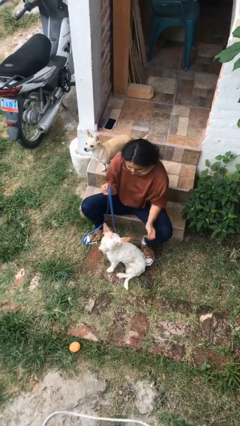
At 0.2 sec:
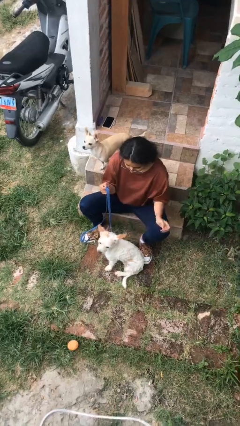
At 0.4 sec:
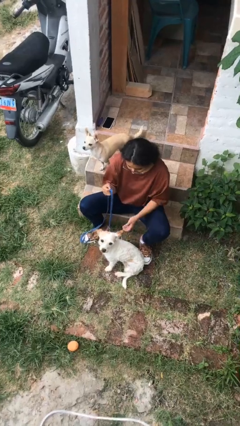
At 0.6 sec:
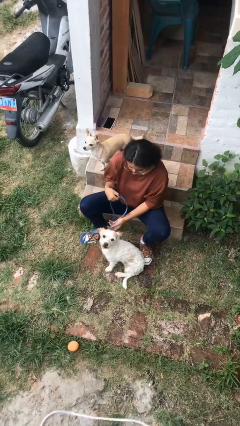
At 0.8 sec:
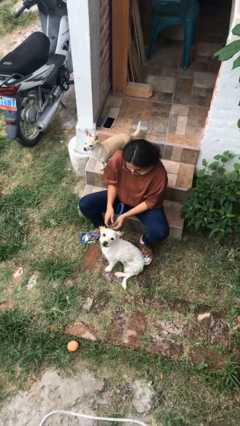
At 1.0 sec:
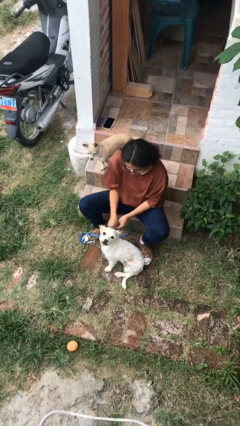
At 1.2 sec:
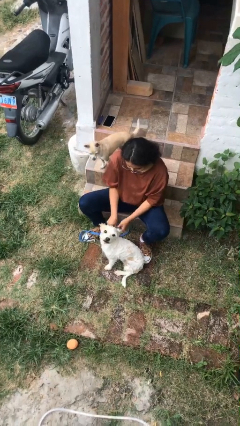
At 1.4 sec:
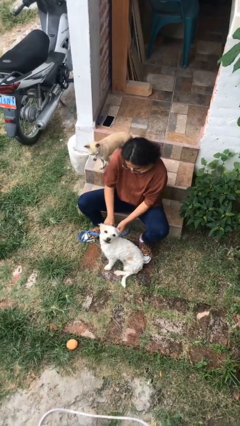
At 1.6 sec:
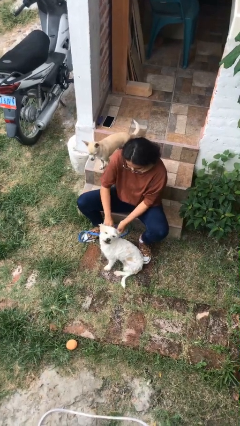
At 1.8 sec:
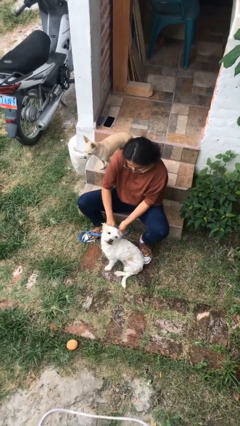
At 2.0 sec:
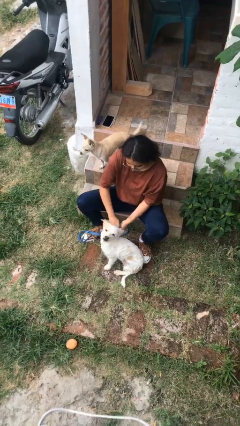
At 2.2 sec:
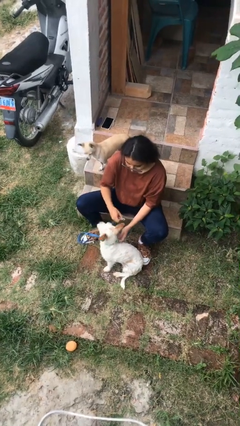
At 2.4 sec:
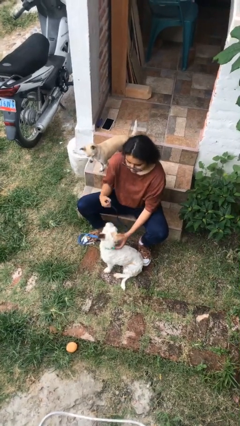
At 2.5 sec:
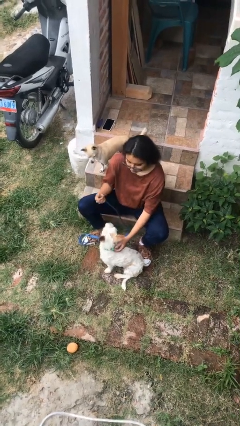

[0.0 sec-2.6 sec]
person unattaches leash from dog

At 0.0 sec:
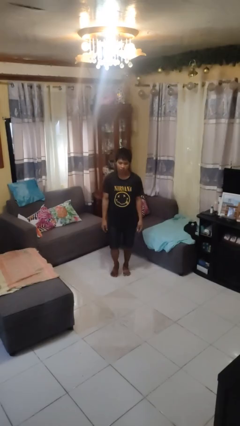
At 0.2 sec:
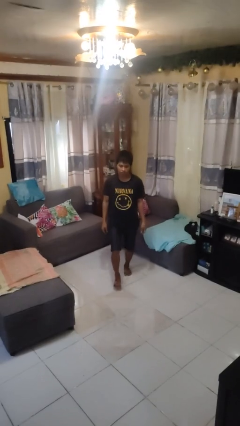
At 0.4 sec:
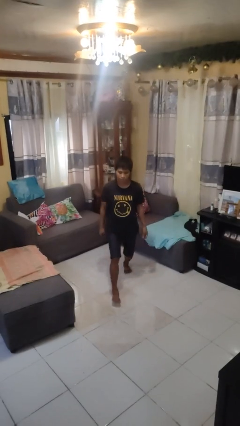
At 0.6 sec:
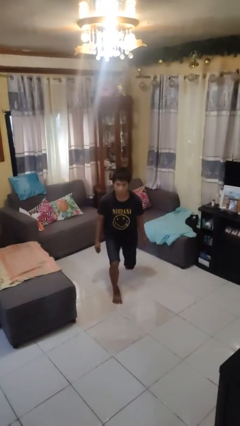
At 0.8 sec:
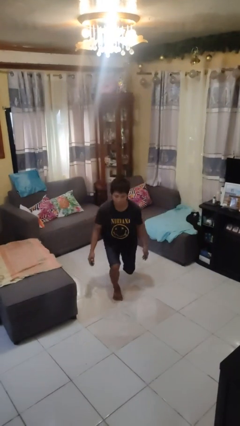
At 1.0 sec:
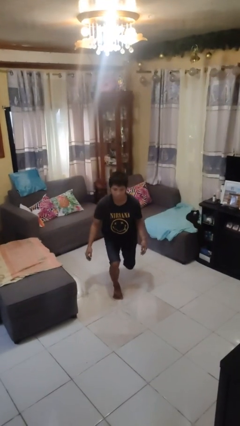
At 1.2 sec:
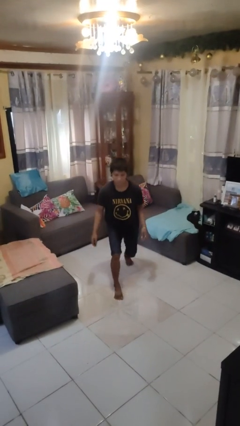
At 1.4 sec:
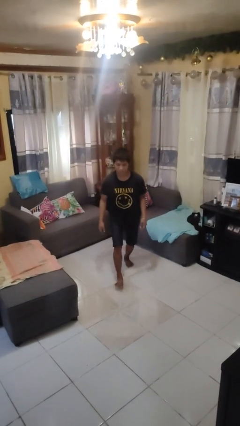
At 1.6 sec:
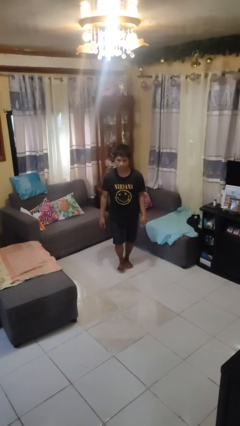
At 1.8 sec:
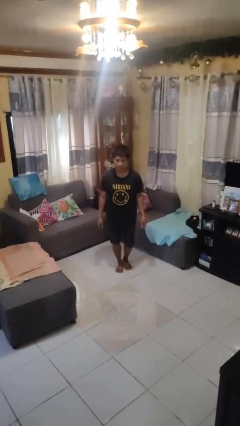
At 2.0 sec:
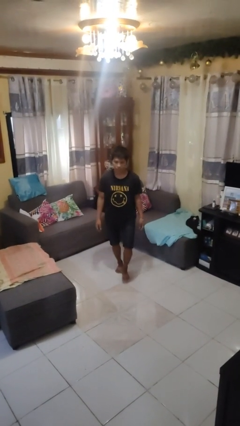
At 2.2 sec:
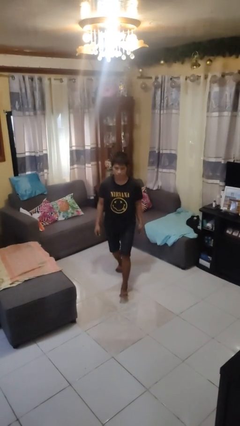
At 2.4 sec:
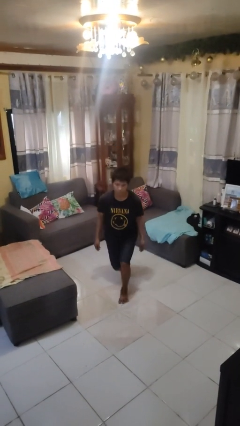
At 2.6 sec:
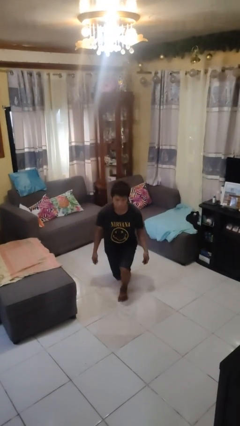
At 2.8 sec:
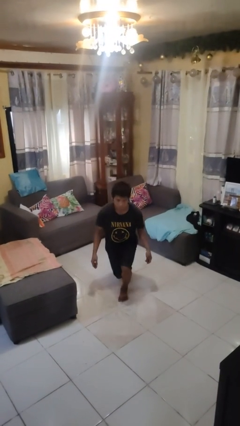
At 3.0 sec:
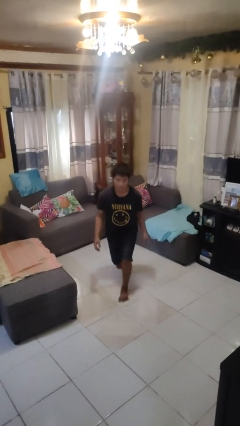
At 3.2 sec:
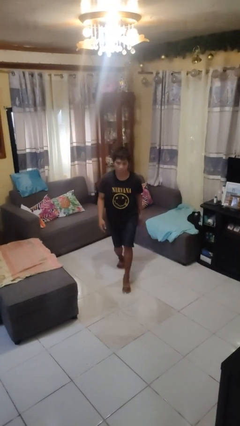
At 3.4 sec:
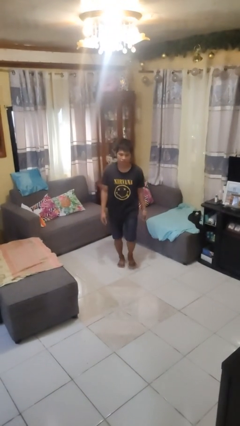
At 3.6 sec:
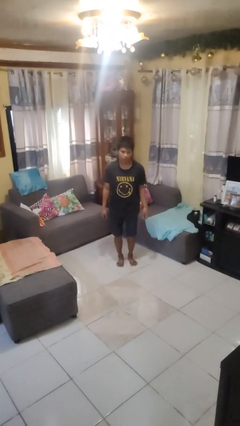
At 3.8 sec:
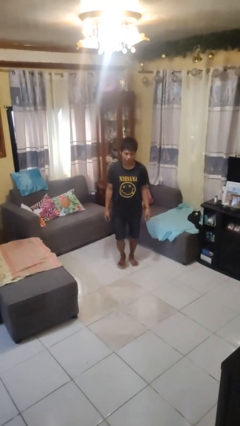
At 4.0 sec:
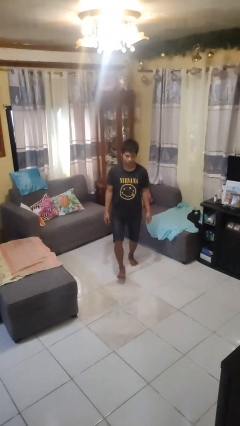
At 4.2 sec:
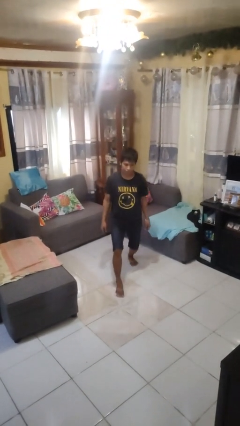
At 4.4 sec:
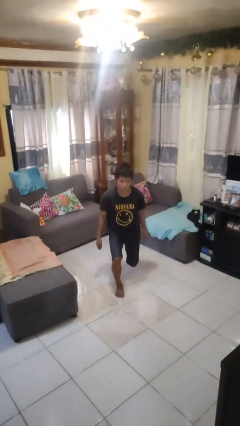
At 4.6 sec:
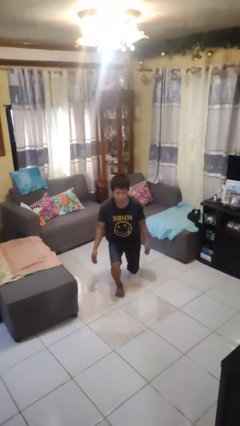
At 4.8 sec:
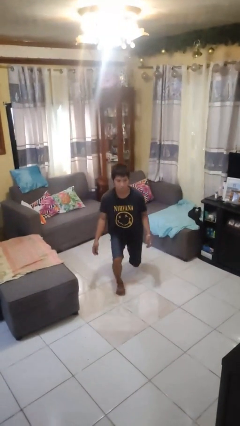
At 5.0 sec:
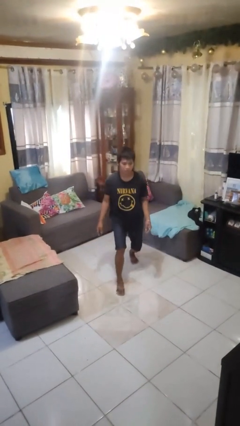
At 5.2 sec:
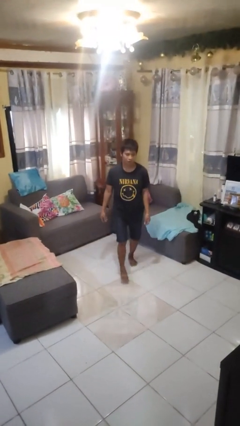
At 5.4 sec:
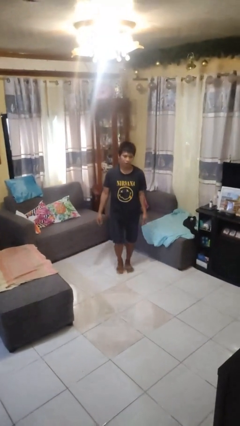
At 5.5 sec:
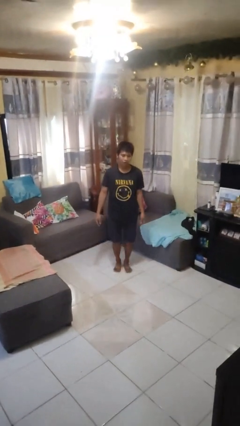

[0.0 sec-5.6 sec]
person exercises with lunges

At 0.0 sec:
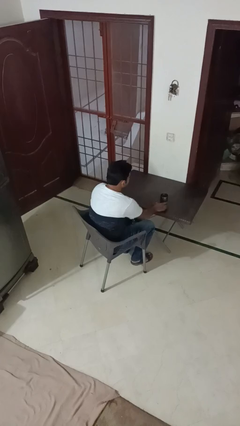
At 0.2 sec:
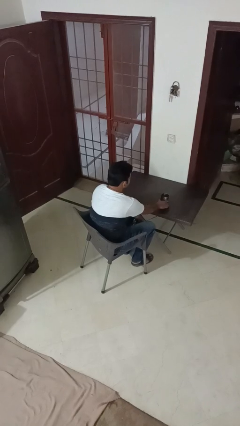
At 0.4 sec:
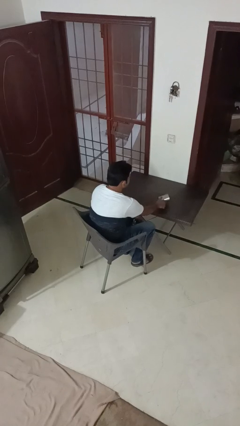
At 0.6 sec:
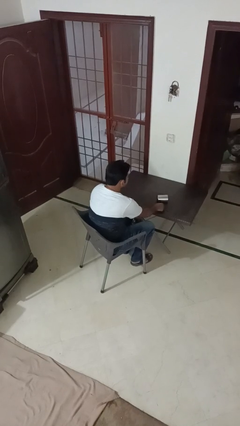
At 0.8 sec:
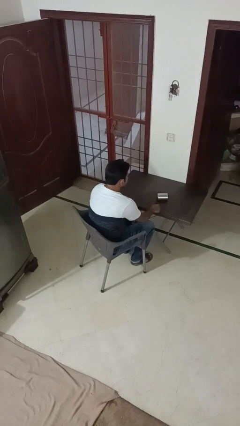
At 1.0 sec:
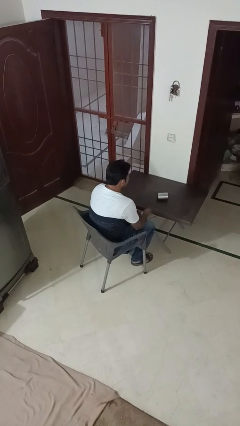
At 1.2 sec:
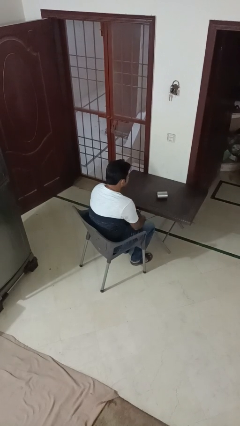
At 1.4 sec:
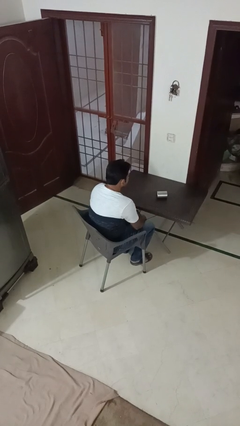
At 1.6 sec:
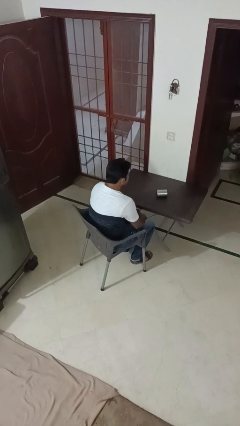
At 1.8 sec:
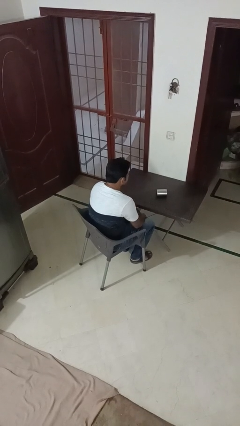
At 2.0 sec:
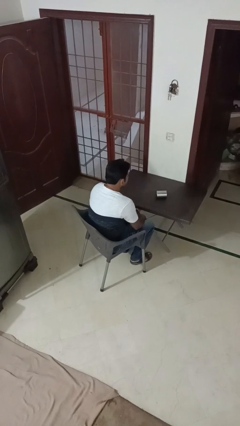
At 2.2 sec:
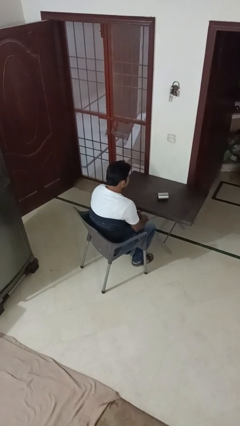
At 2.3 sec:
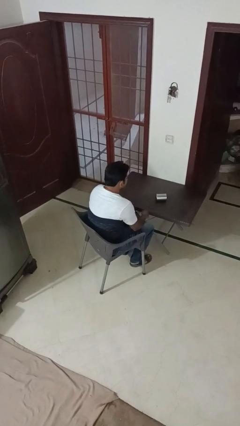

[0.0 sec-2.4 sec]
person knocks over glass

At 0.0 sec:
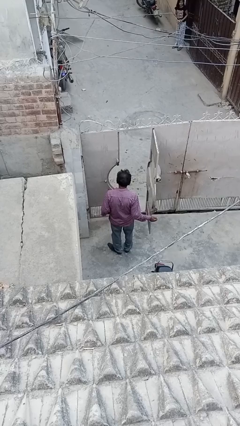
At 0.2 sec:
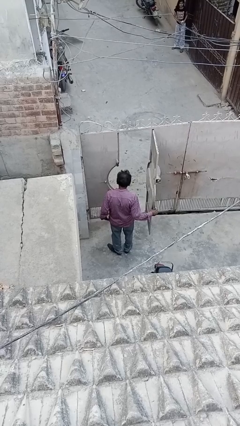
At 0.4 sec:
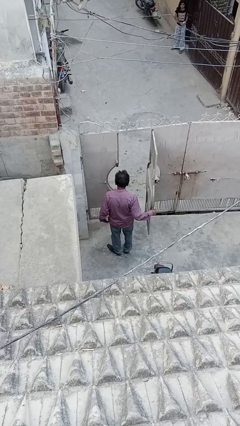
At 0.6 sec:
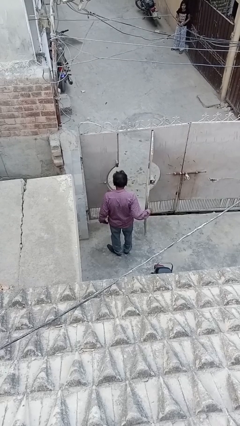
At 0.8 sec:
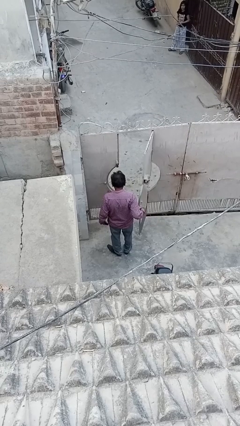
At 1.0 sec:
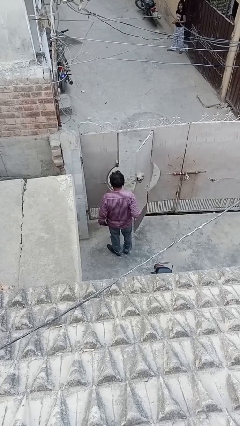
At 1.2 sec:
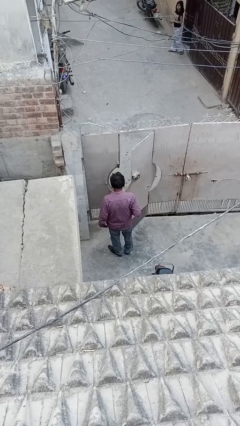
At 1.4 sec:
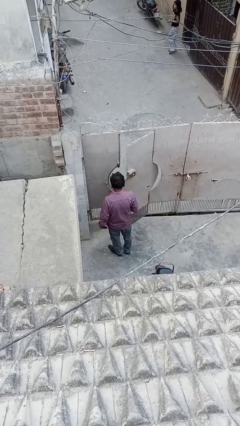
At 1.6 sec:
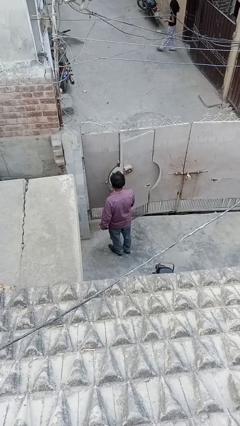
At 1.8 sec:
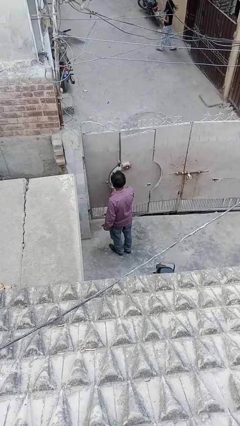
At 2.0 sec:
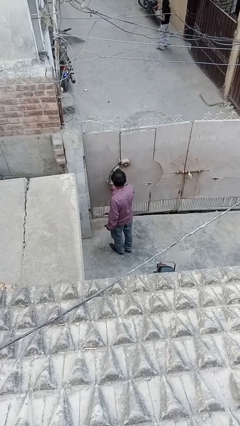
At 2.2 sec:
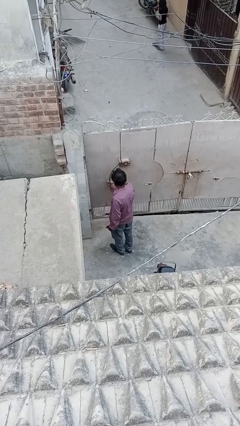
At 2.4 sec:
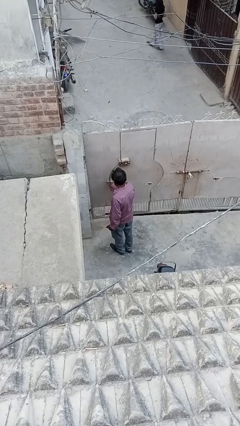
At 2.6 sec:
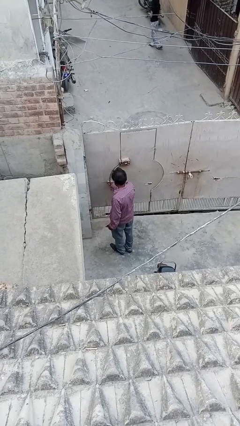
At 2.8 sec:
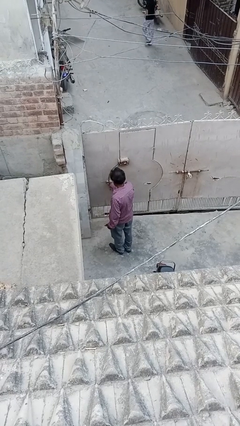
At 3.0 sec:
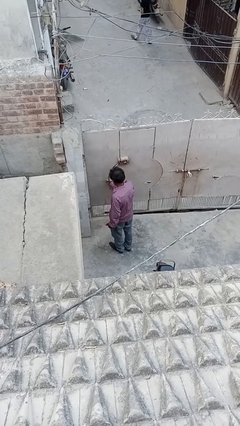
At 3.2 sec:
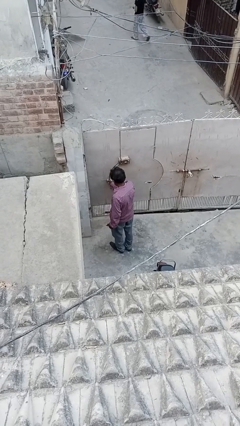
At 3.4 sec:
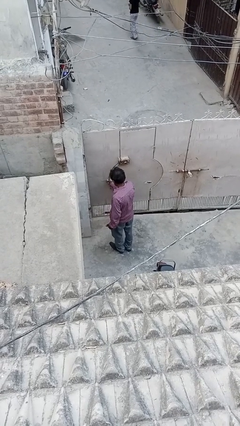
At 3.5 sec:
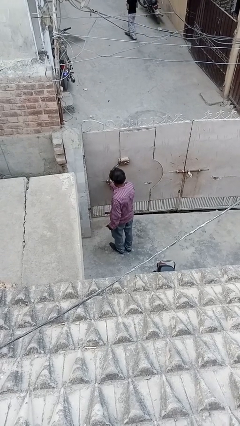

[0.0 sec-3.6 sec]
person closes facility door

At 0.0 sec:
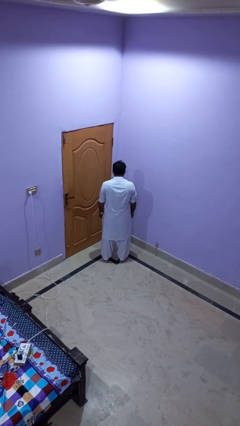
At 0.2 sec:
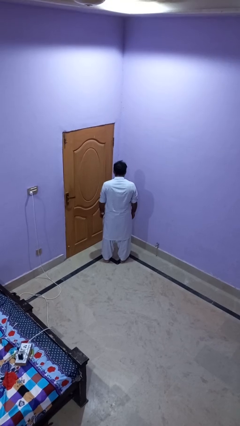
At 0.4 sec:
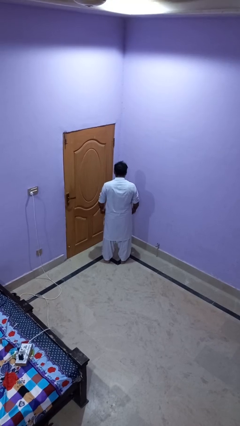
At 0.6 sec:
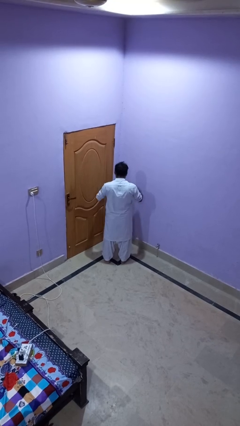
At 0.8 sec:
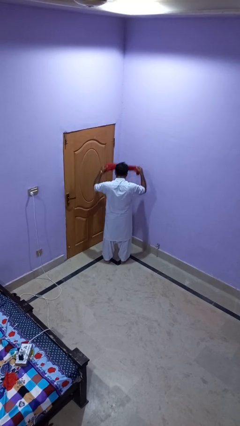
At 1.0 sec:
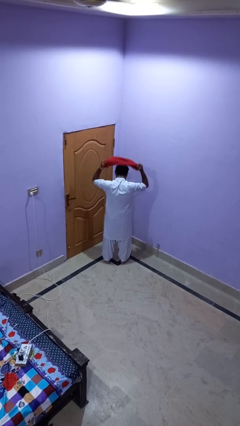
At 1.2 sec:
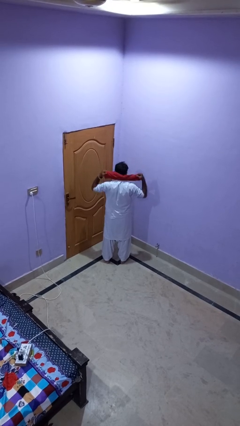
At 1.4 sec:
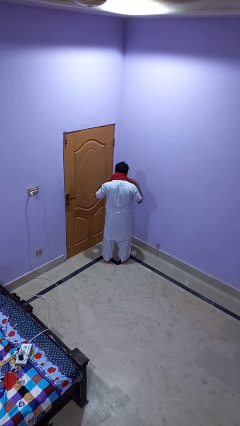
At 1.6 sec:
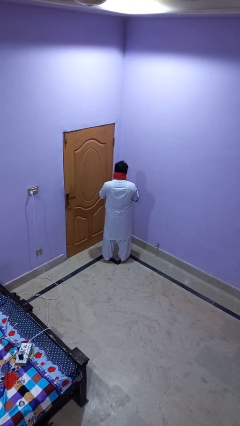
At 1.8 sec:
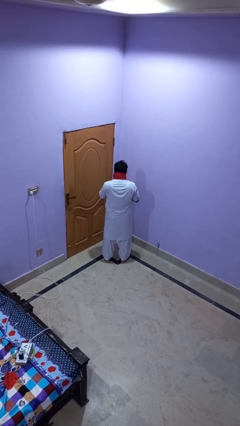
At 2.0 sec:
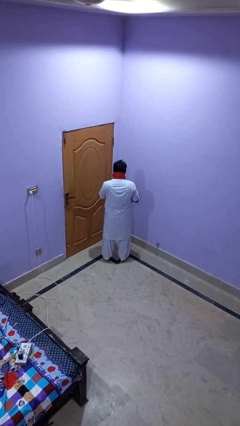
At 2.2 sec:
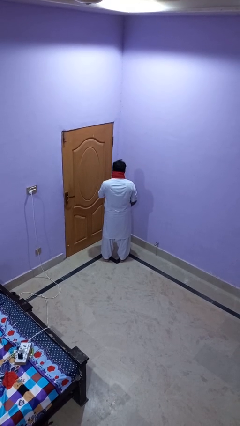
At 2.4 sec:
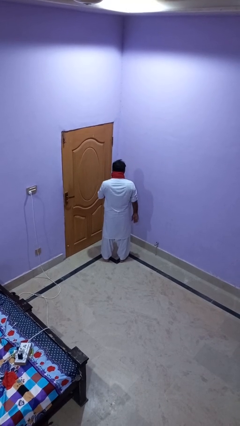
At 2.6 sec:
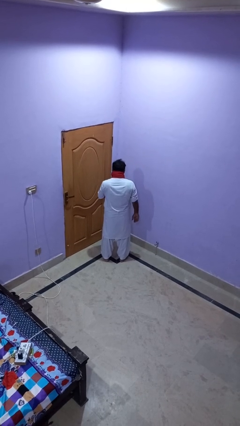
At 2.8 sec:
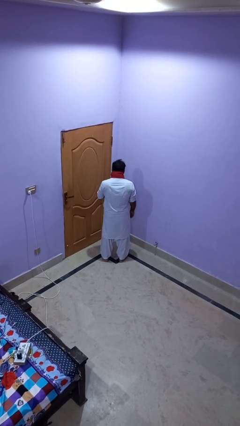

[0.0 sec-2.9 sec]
person puts on scarf

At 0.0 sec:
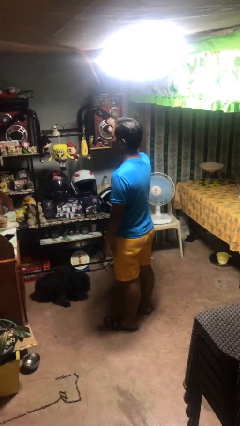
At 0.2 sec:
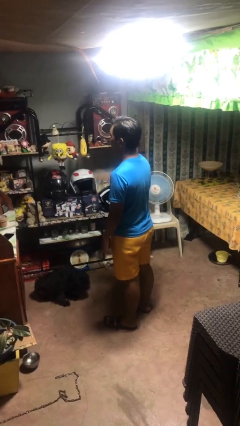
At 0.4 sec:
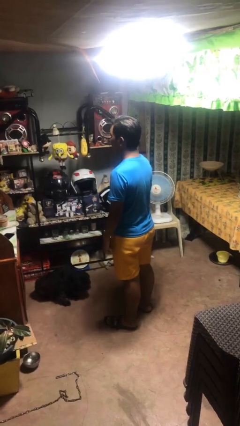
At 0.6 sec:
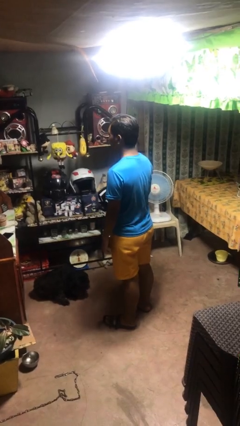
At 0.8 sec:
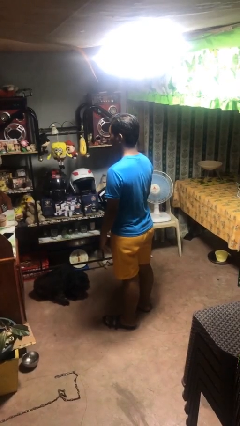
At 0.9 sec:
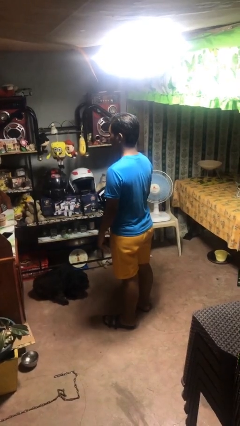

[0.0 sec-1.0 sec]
person gestures lower hand
